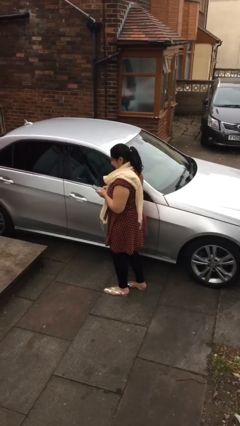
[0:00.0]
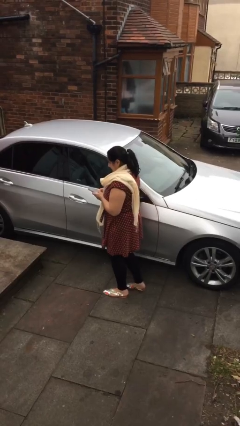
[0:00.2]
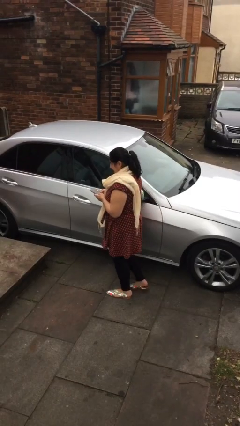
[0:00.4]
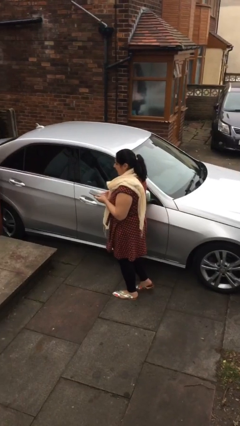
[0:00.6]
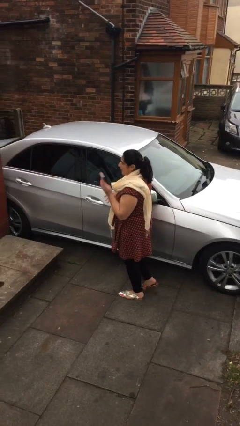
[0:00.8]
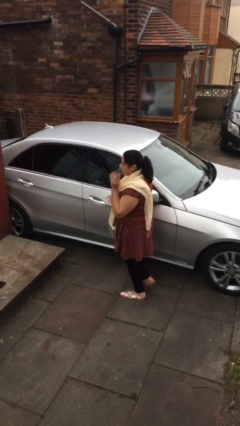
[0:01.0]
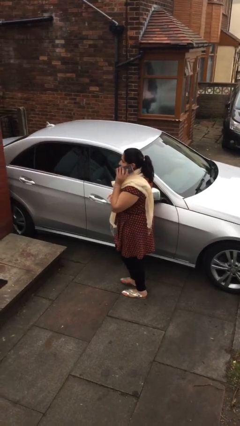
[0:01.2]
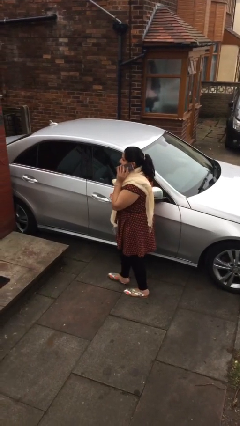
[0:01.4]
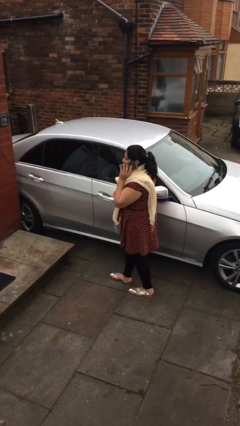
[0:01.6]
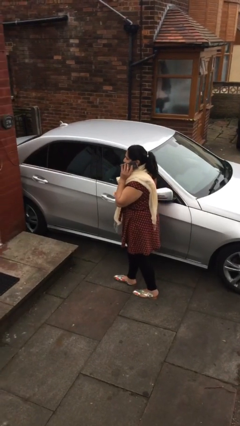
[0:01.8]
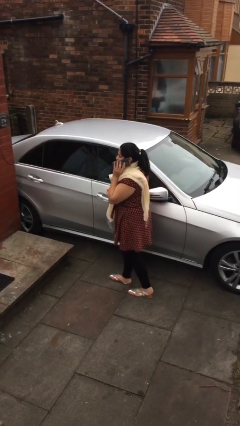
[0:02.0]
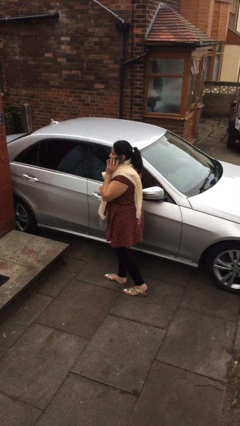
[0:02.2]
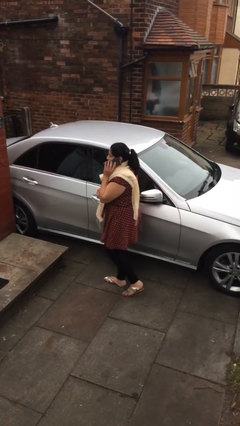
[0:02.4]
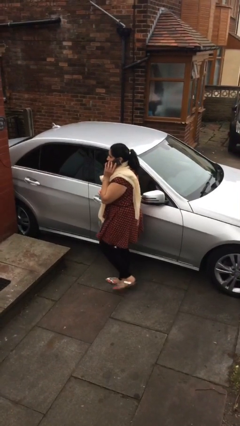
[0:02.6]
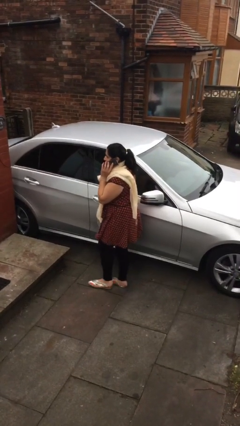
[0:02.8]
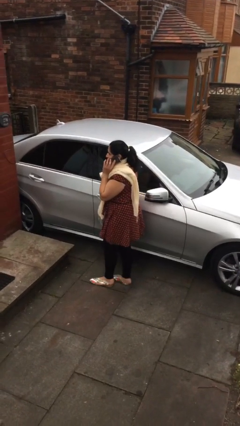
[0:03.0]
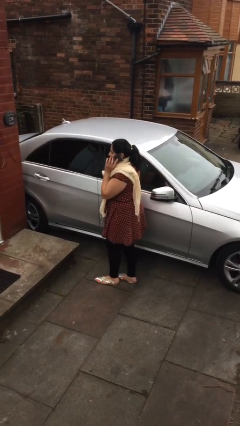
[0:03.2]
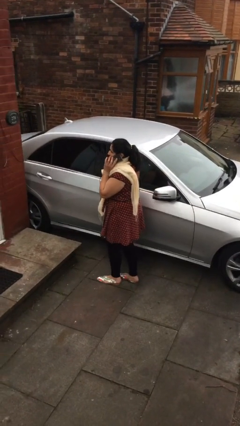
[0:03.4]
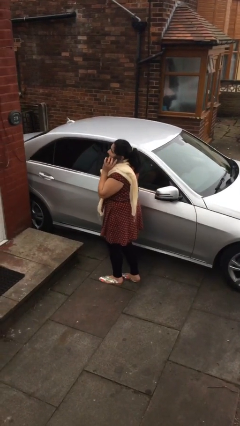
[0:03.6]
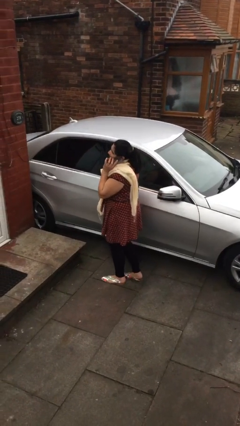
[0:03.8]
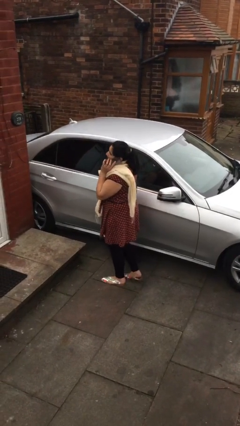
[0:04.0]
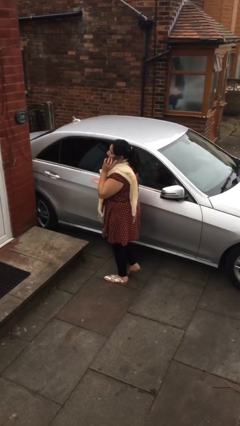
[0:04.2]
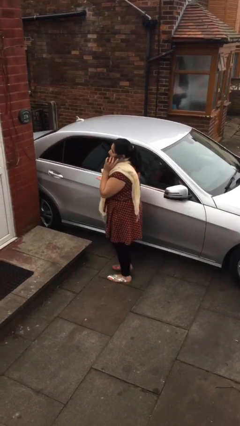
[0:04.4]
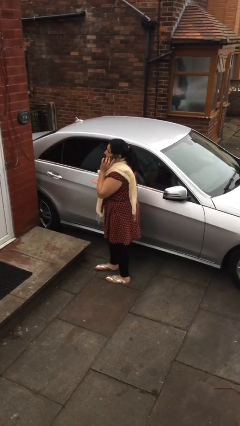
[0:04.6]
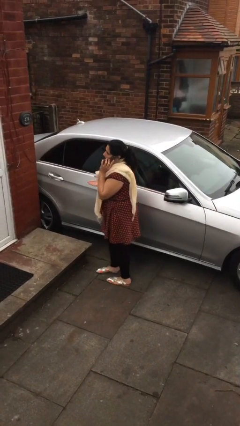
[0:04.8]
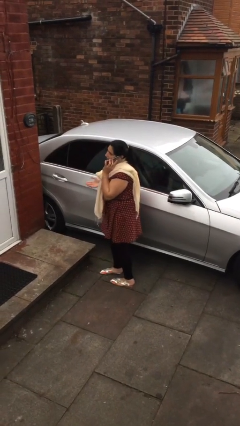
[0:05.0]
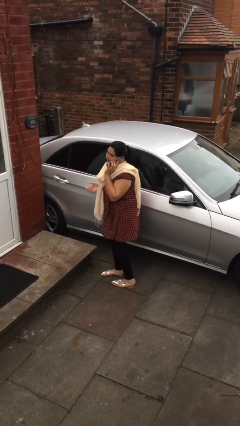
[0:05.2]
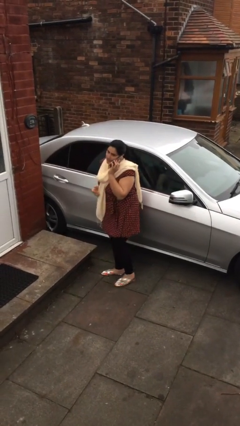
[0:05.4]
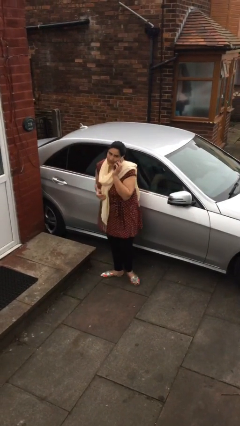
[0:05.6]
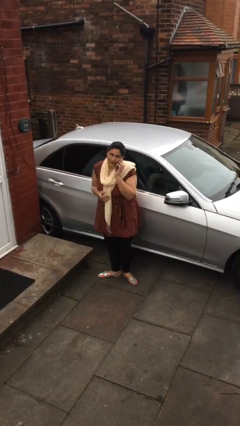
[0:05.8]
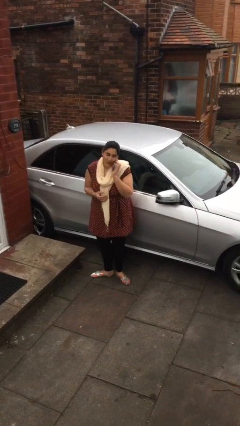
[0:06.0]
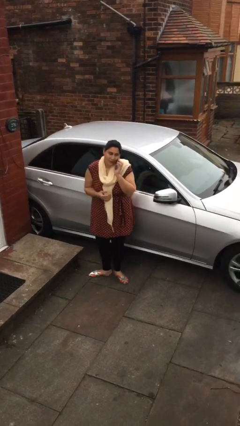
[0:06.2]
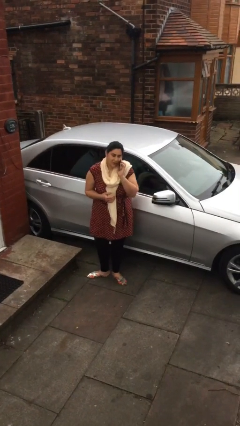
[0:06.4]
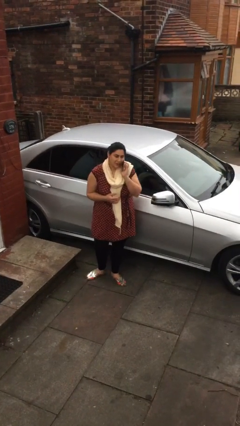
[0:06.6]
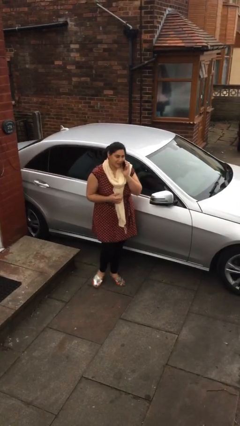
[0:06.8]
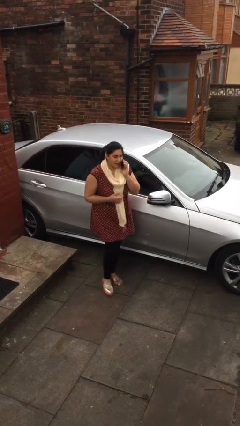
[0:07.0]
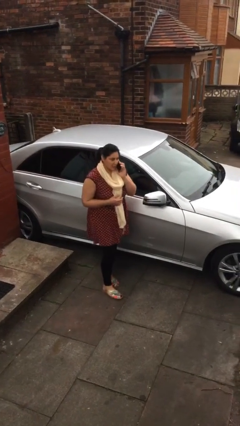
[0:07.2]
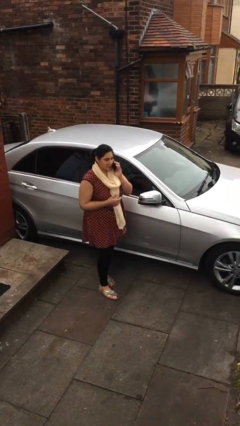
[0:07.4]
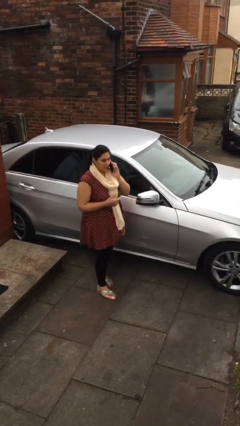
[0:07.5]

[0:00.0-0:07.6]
person talks on phone

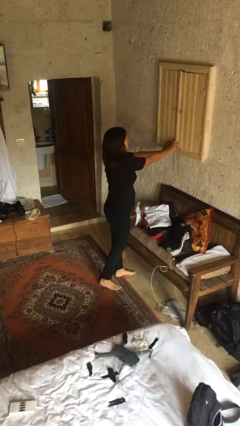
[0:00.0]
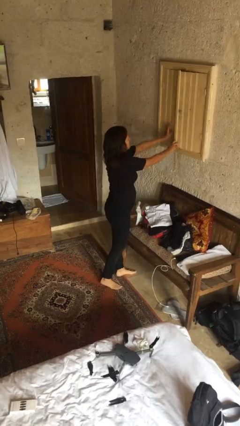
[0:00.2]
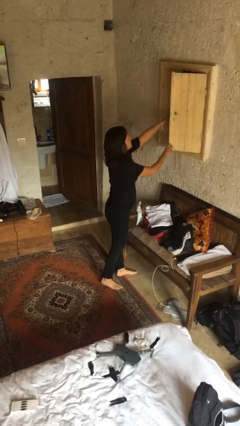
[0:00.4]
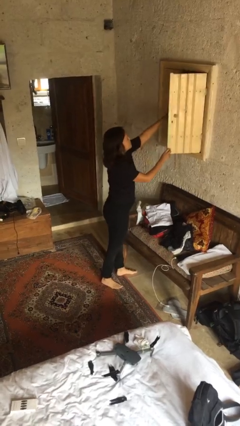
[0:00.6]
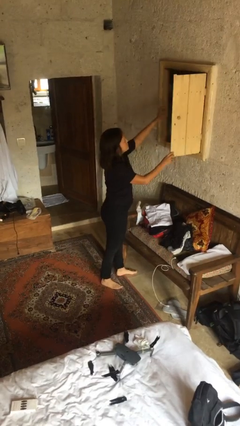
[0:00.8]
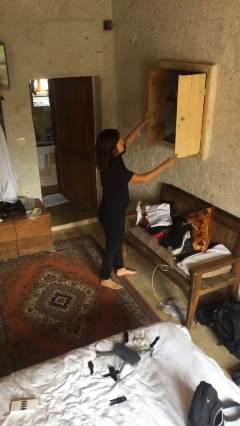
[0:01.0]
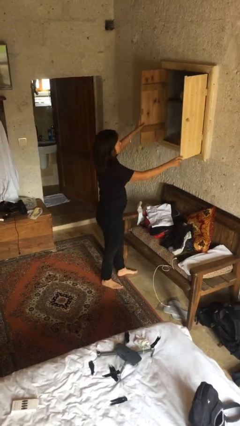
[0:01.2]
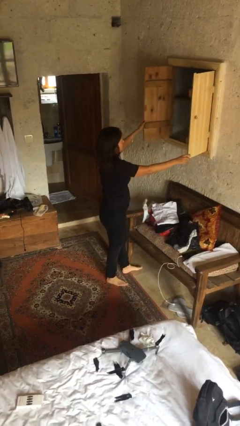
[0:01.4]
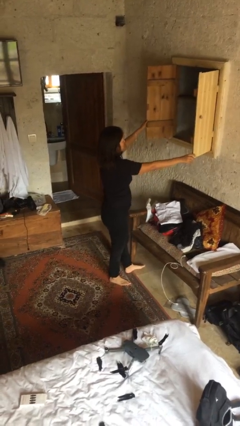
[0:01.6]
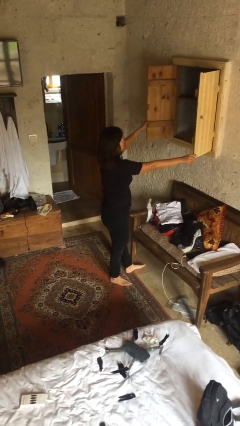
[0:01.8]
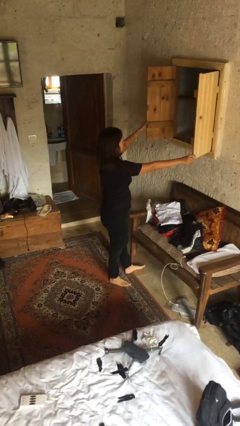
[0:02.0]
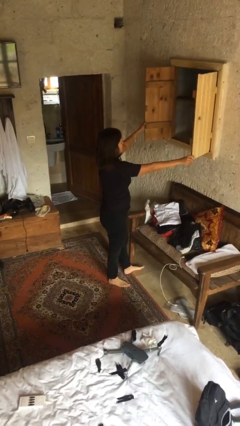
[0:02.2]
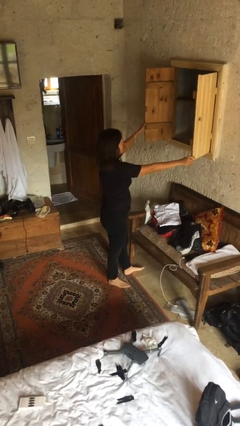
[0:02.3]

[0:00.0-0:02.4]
person opens dresser drawer

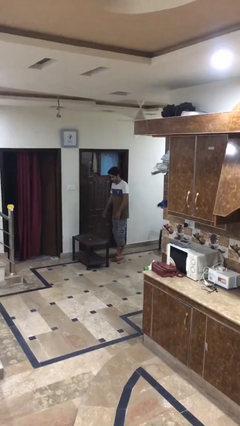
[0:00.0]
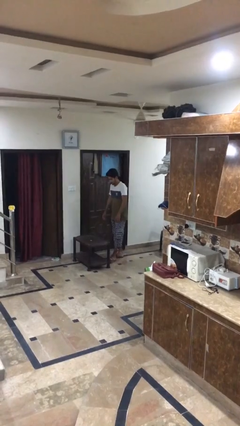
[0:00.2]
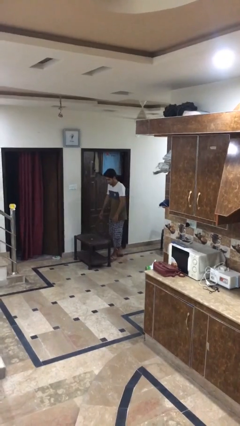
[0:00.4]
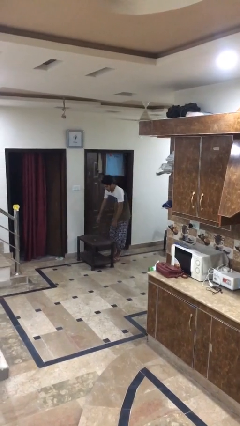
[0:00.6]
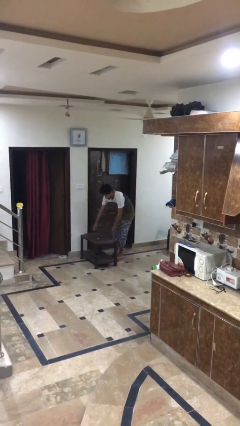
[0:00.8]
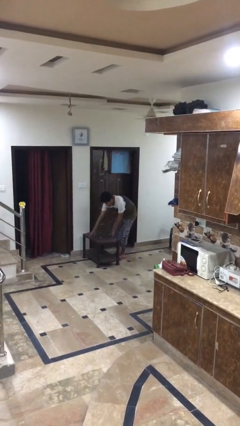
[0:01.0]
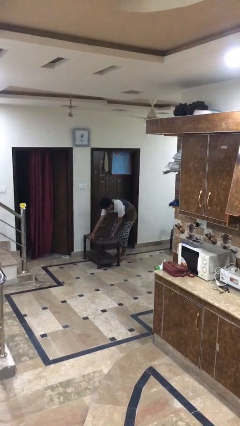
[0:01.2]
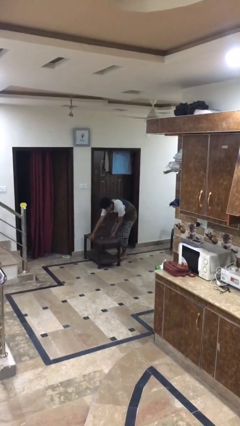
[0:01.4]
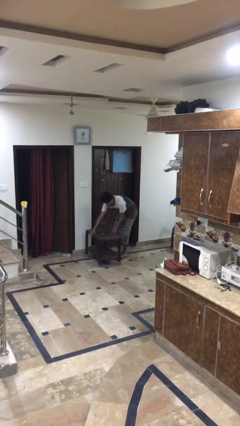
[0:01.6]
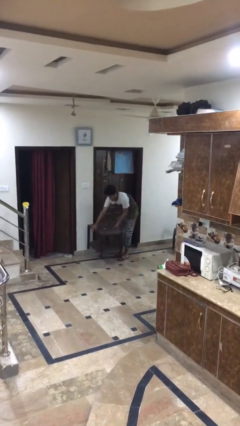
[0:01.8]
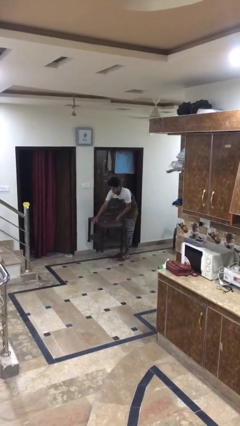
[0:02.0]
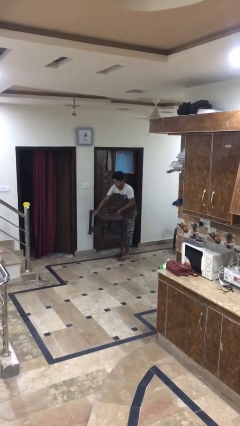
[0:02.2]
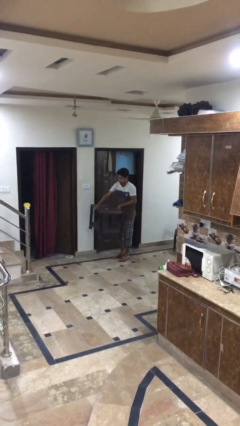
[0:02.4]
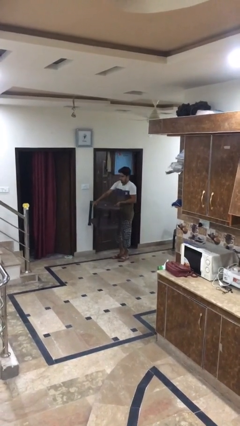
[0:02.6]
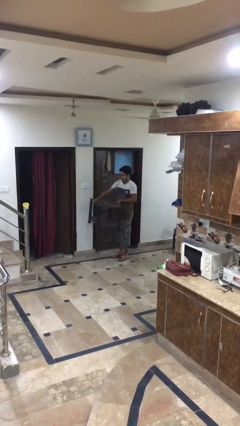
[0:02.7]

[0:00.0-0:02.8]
person picks up object from floor

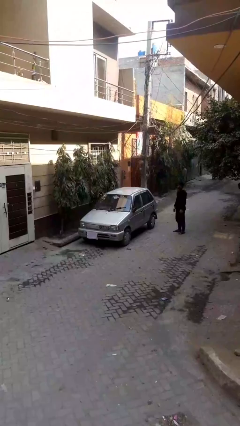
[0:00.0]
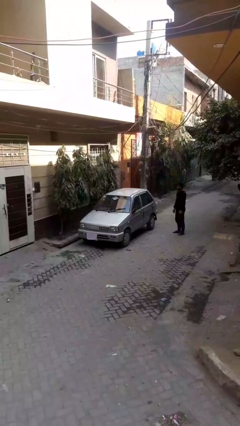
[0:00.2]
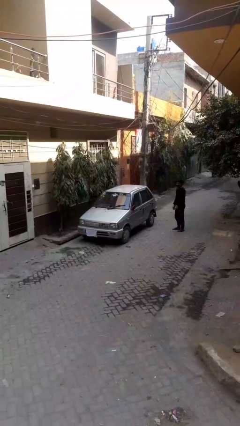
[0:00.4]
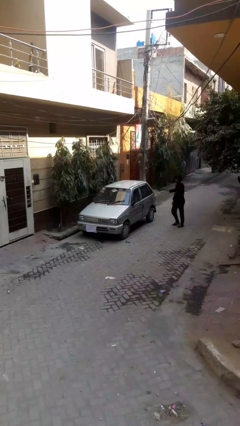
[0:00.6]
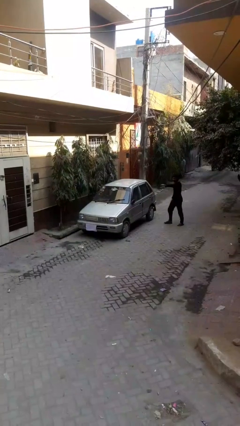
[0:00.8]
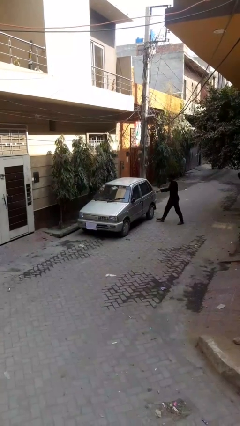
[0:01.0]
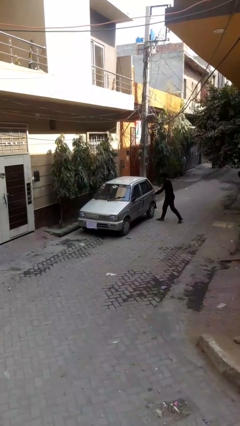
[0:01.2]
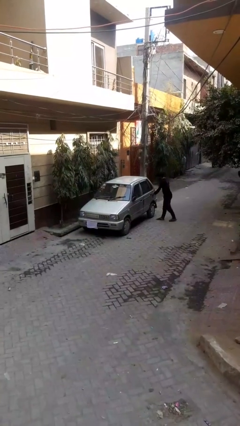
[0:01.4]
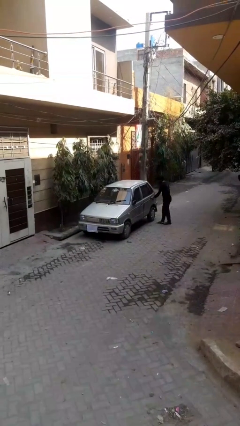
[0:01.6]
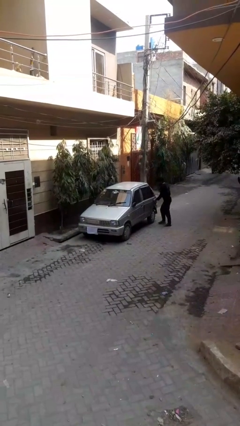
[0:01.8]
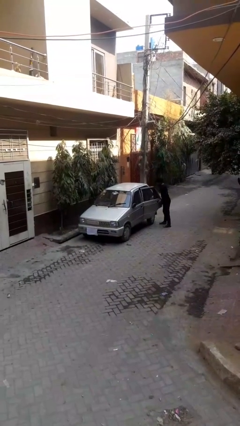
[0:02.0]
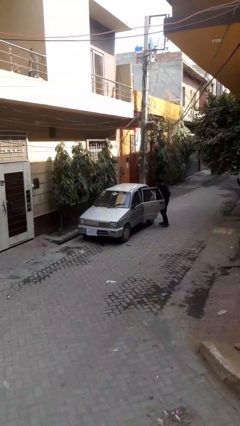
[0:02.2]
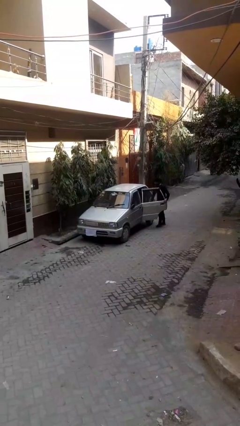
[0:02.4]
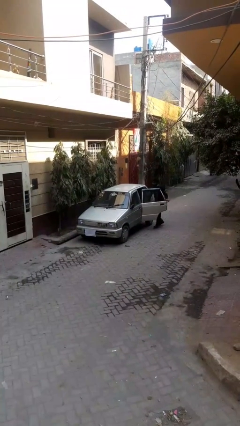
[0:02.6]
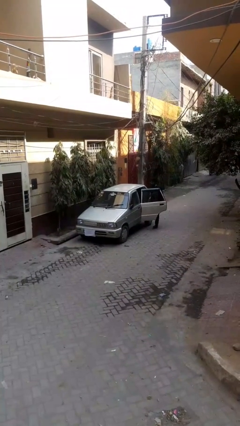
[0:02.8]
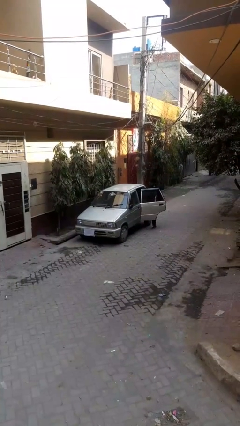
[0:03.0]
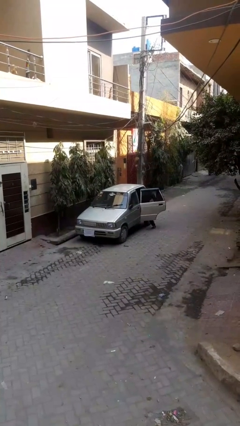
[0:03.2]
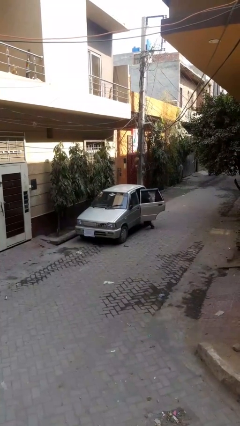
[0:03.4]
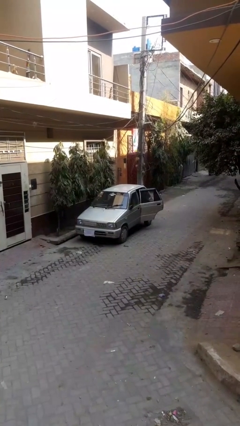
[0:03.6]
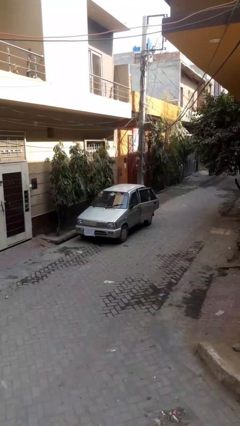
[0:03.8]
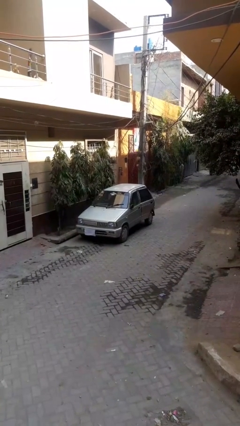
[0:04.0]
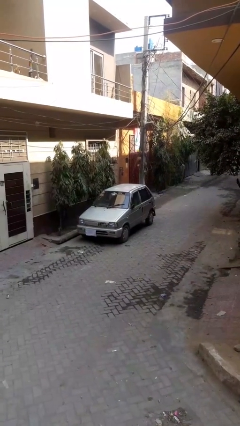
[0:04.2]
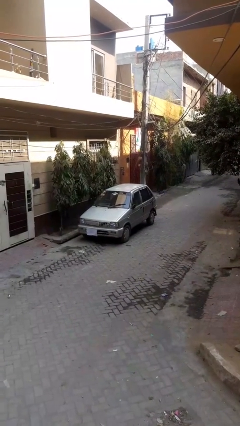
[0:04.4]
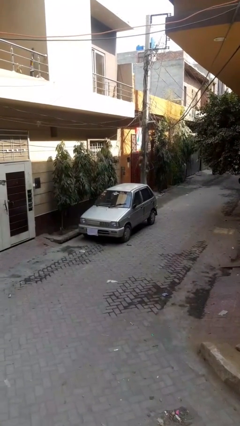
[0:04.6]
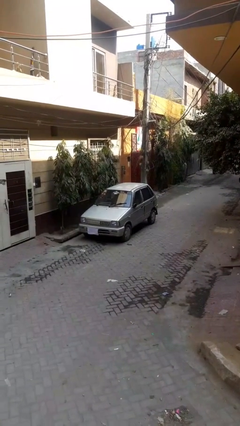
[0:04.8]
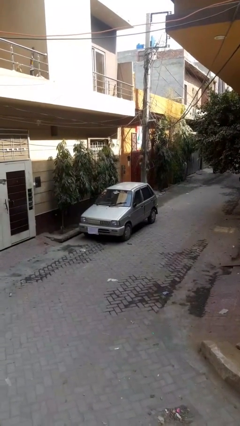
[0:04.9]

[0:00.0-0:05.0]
car picks up person
